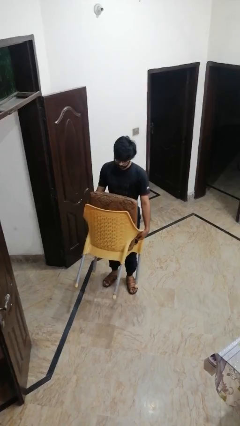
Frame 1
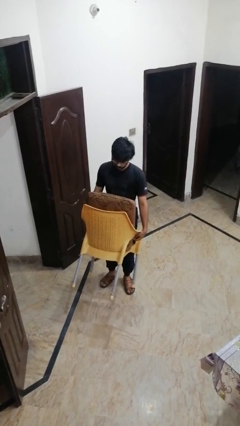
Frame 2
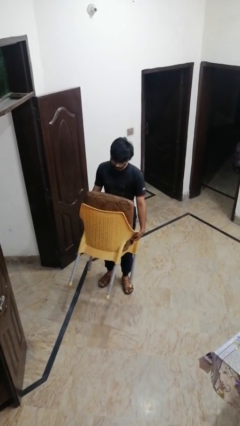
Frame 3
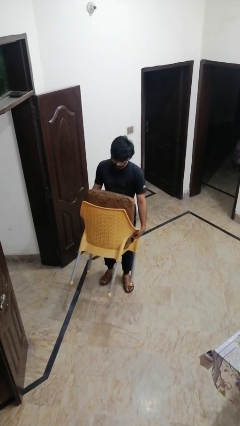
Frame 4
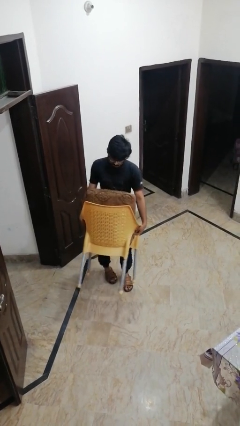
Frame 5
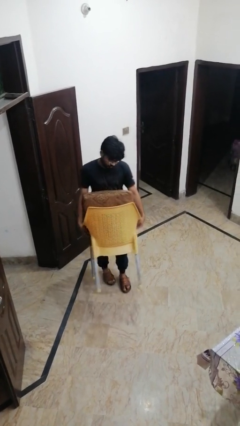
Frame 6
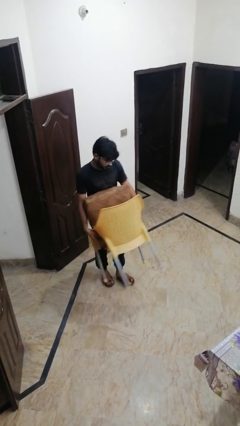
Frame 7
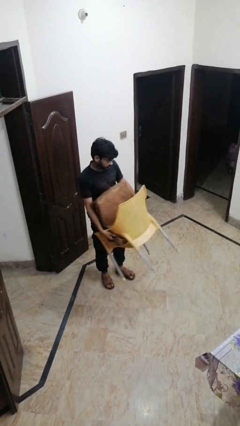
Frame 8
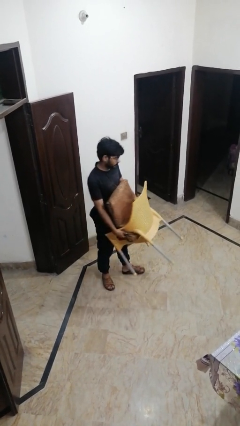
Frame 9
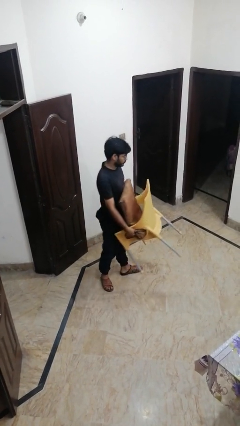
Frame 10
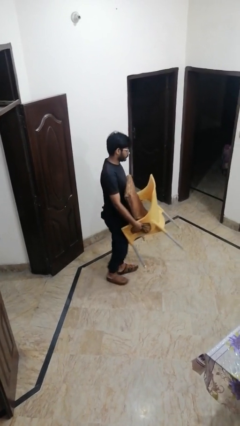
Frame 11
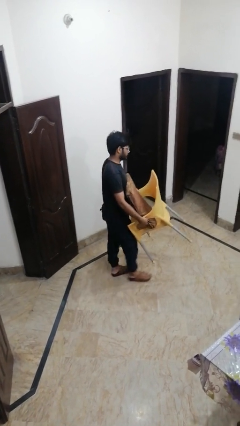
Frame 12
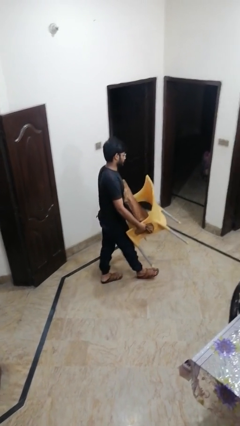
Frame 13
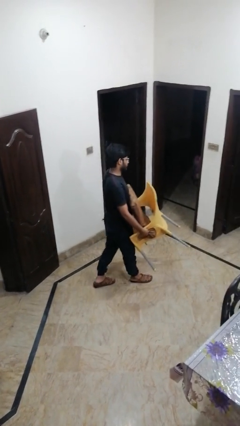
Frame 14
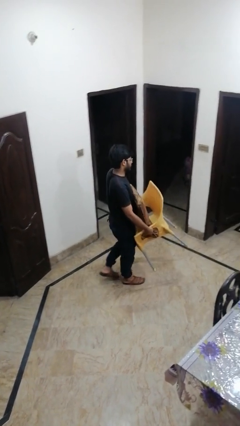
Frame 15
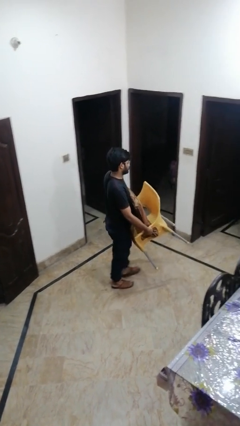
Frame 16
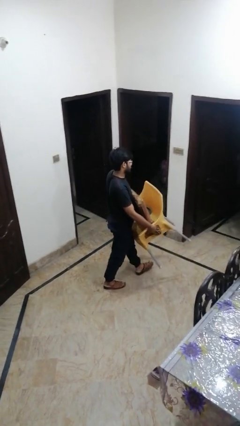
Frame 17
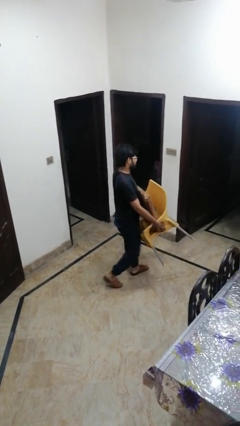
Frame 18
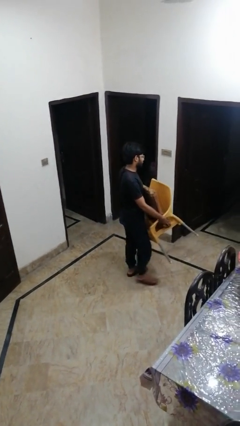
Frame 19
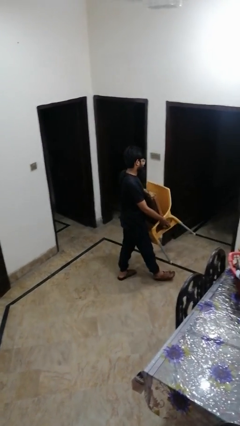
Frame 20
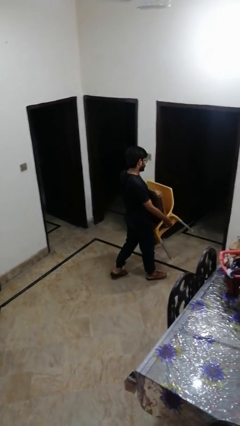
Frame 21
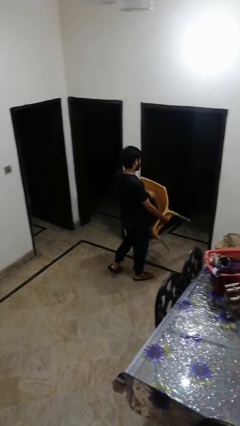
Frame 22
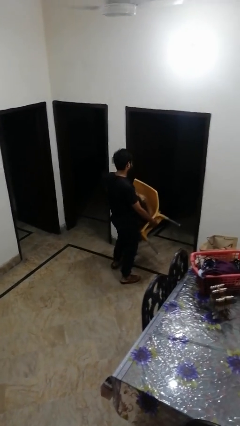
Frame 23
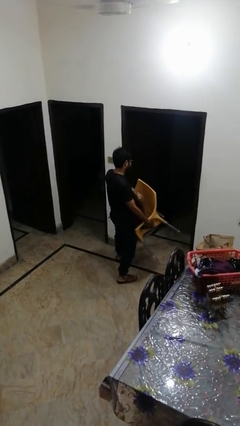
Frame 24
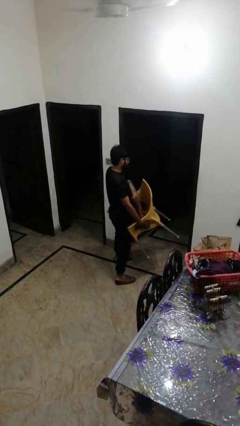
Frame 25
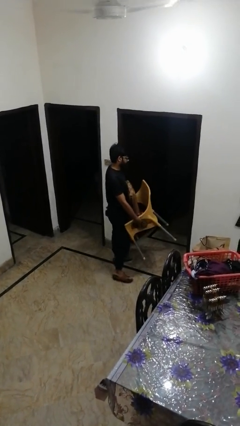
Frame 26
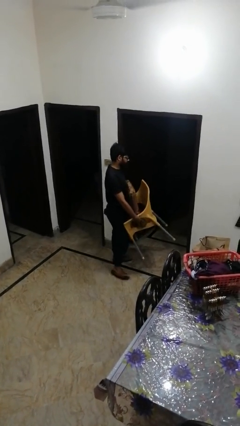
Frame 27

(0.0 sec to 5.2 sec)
person carries furniture

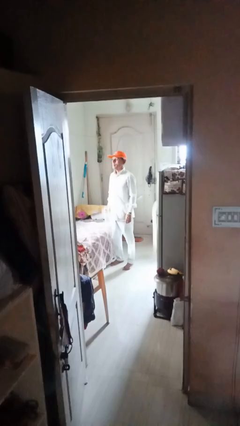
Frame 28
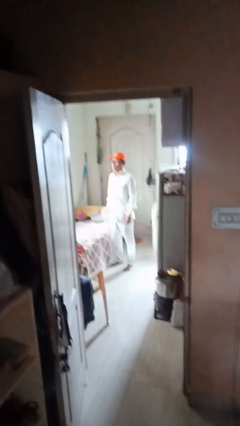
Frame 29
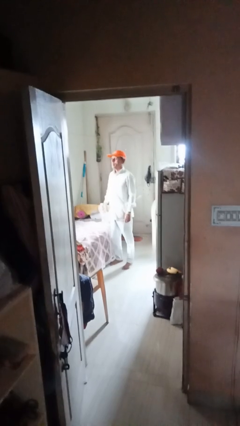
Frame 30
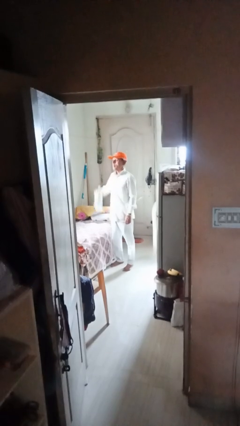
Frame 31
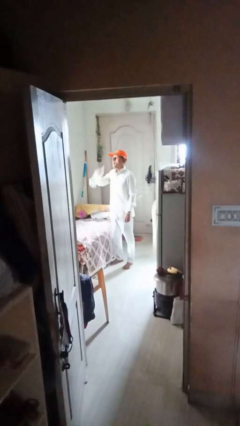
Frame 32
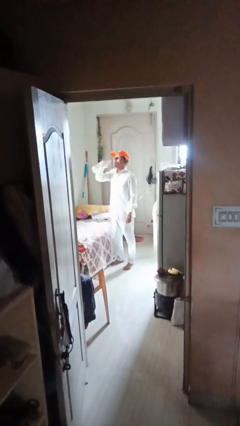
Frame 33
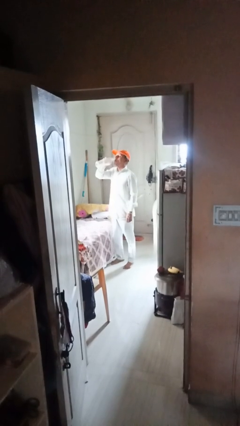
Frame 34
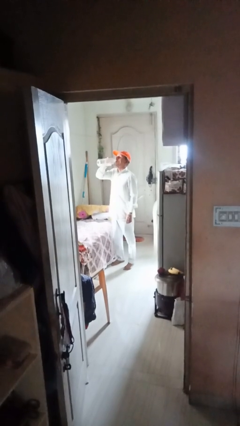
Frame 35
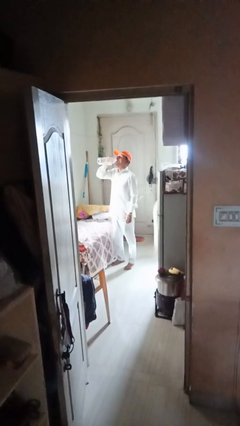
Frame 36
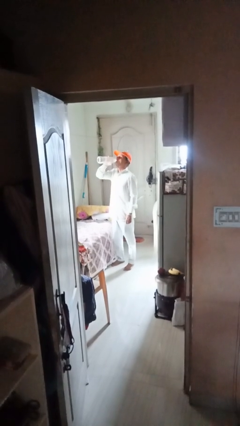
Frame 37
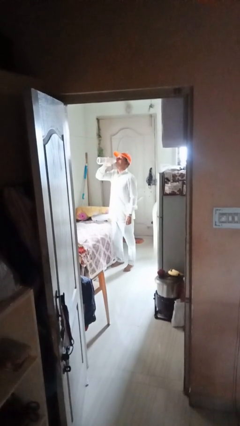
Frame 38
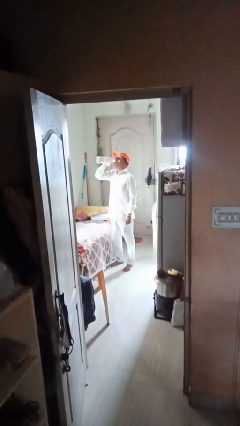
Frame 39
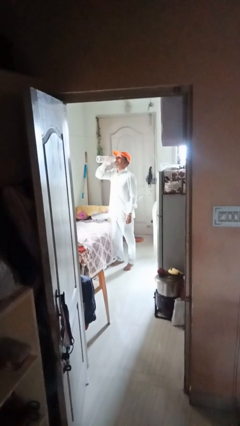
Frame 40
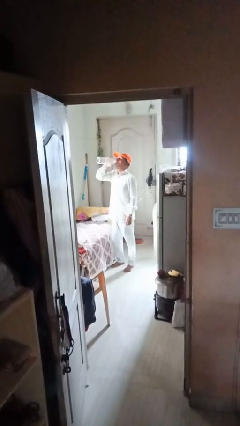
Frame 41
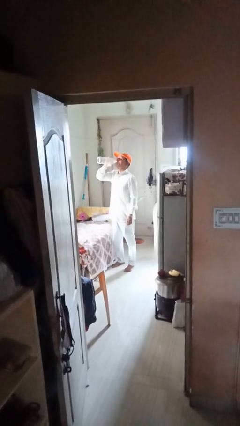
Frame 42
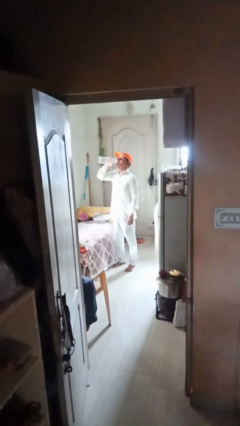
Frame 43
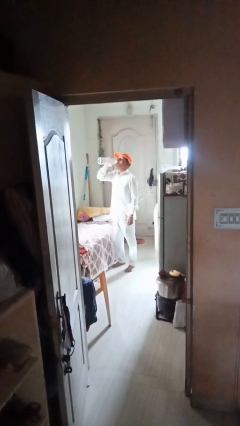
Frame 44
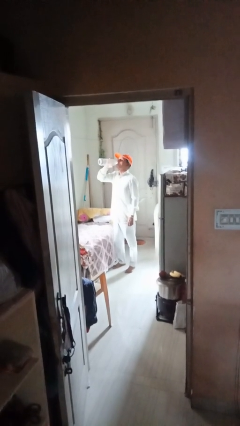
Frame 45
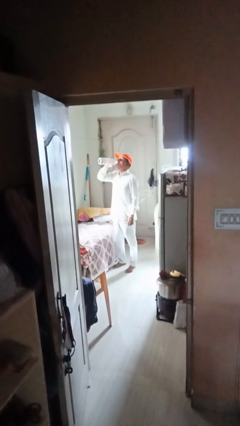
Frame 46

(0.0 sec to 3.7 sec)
person drinks from bottle

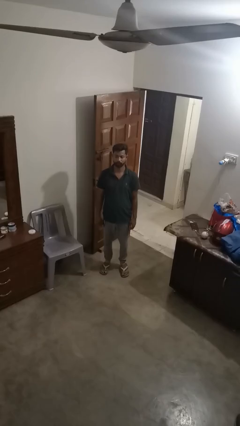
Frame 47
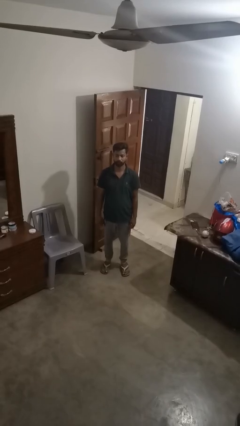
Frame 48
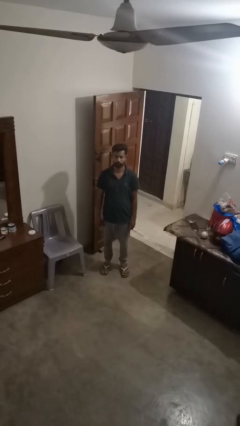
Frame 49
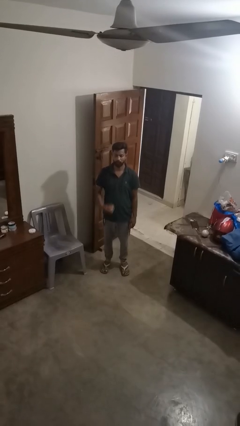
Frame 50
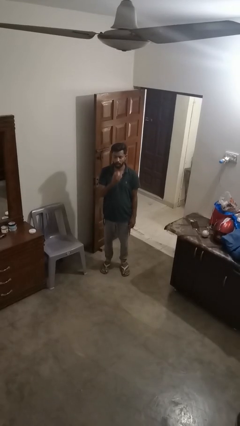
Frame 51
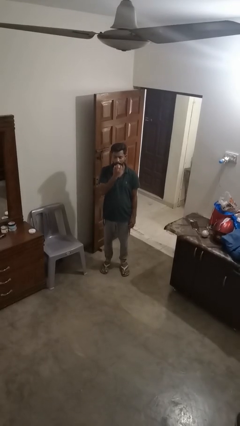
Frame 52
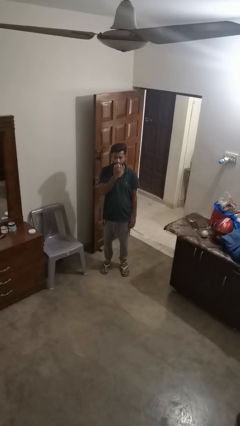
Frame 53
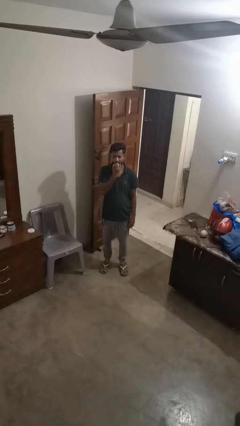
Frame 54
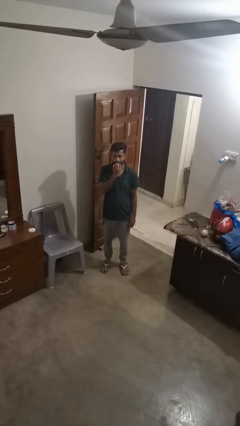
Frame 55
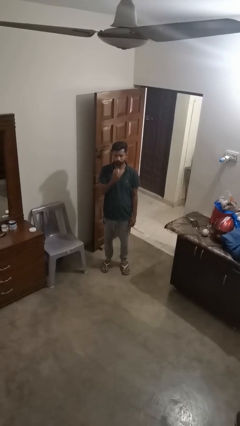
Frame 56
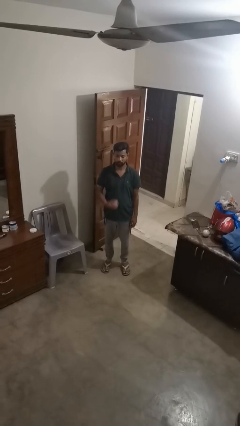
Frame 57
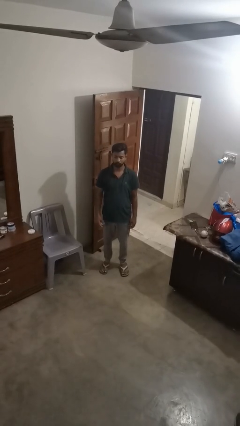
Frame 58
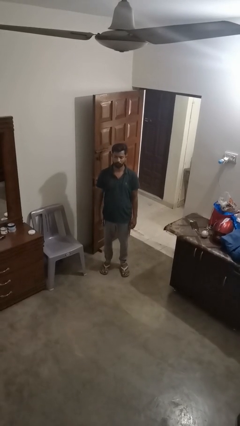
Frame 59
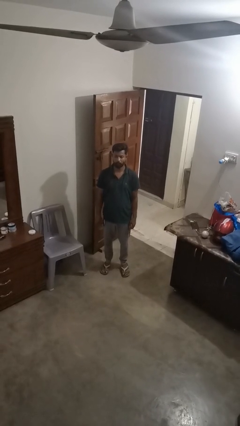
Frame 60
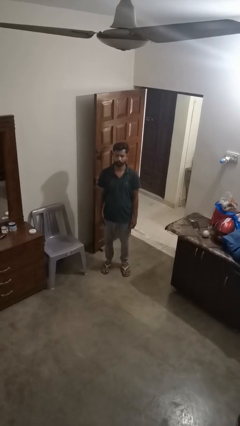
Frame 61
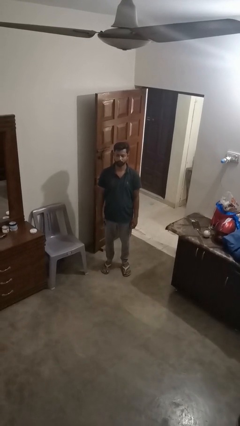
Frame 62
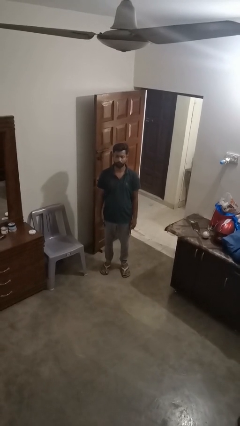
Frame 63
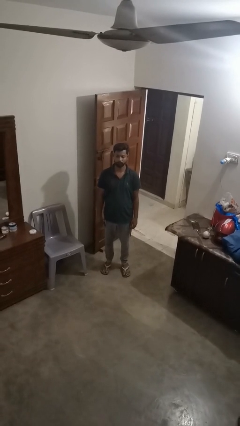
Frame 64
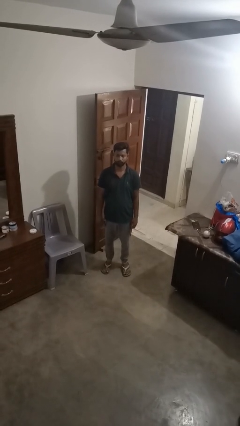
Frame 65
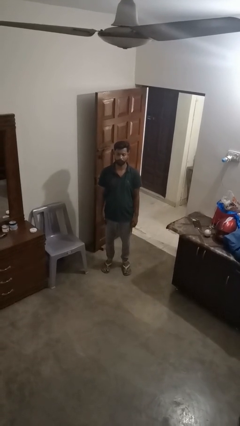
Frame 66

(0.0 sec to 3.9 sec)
person eats apple

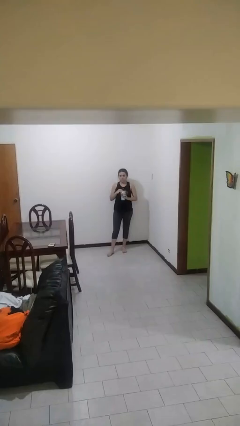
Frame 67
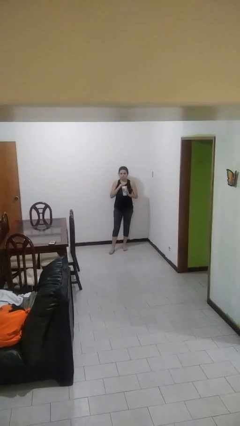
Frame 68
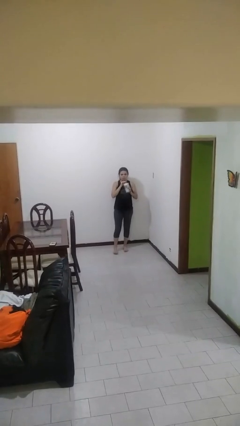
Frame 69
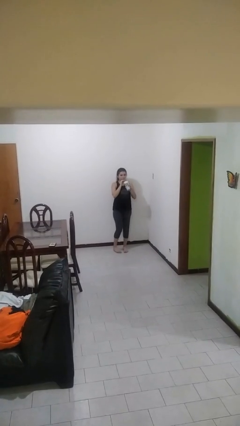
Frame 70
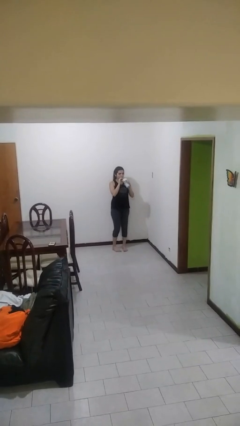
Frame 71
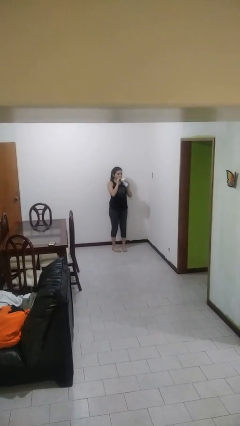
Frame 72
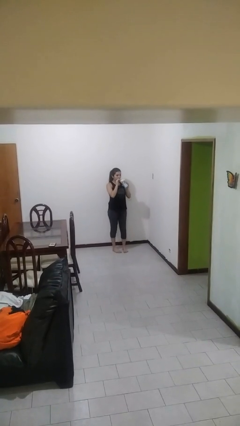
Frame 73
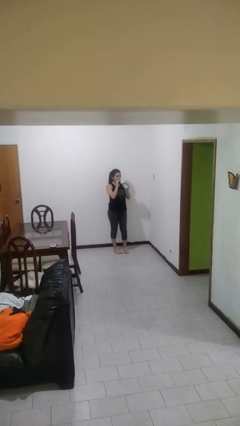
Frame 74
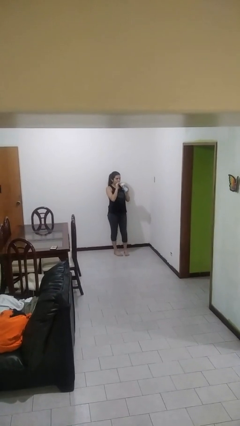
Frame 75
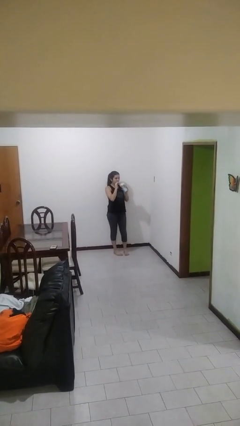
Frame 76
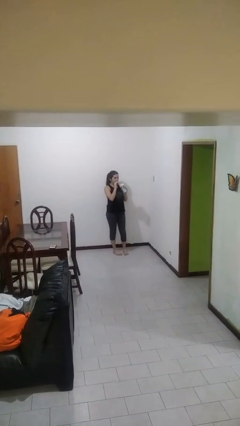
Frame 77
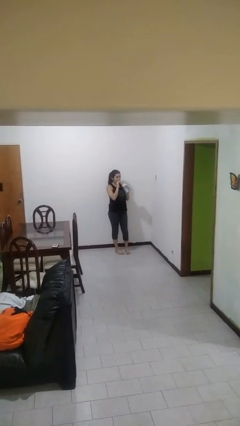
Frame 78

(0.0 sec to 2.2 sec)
person drinks from straw

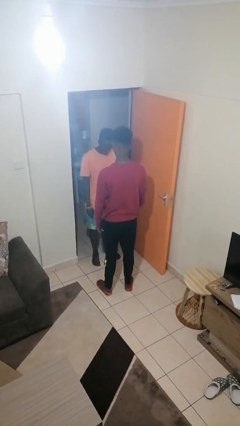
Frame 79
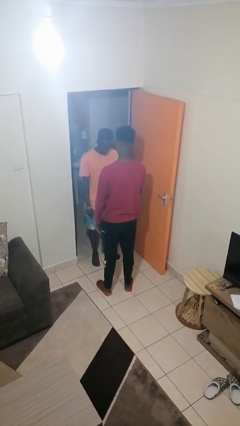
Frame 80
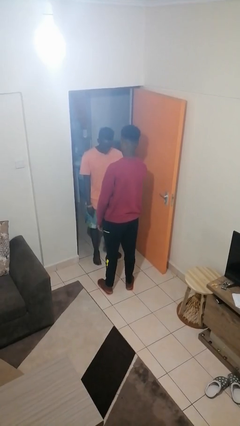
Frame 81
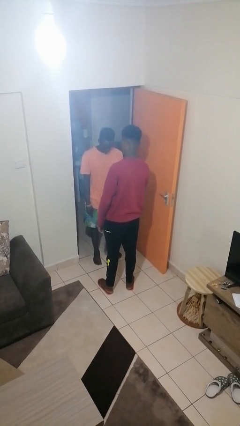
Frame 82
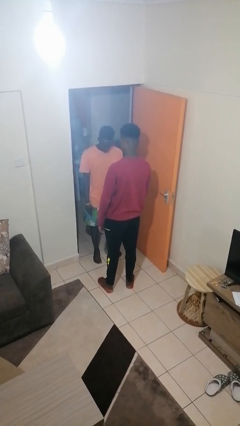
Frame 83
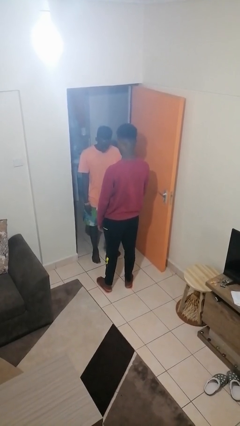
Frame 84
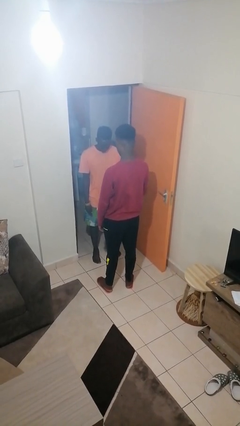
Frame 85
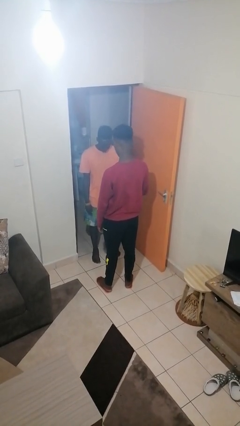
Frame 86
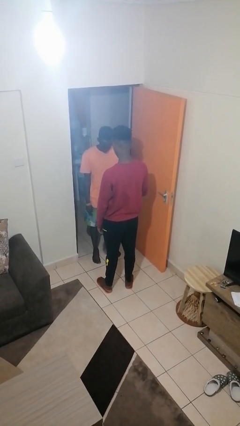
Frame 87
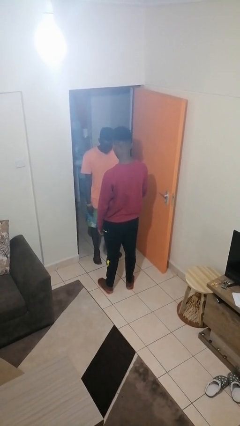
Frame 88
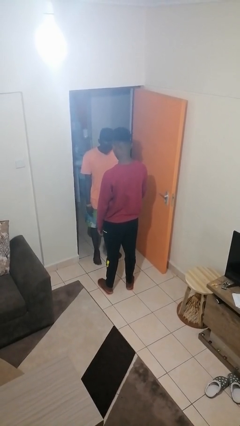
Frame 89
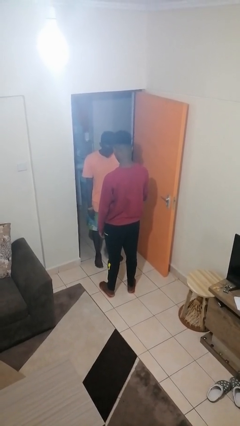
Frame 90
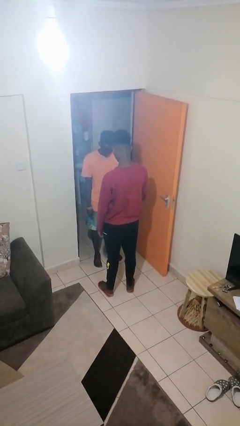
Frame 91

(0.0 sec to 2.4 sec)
person grabs person by forearm

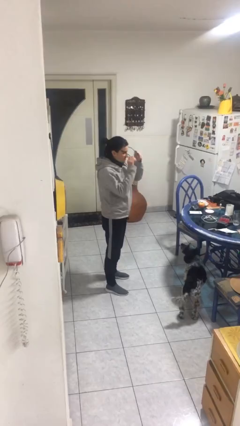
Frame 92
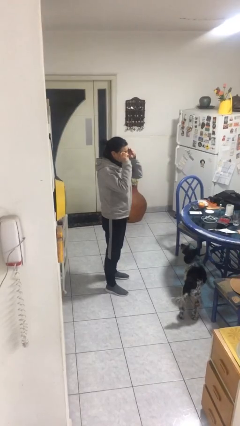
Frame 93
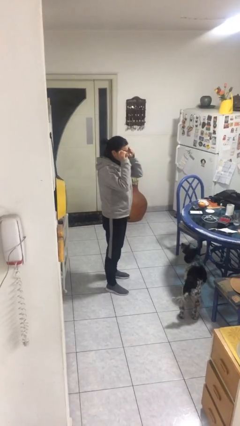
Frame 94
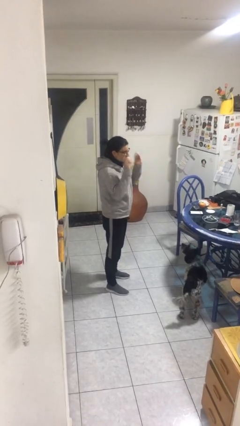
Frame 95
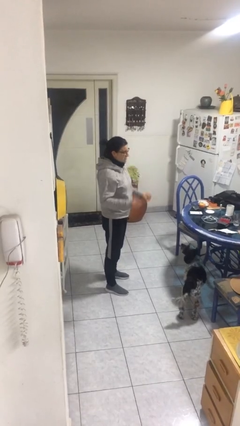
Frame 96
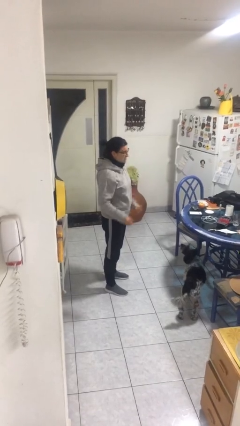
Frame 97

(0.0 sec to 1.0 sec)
person puts on glasses
